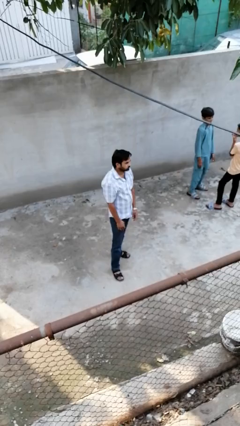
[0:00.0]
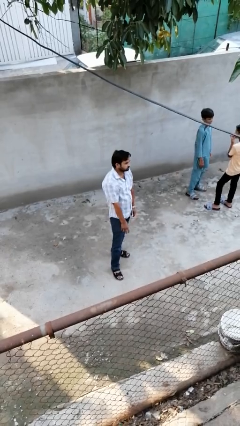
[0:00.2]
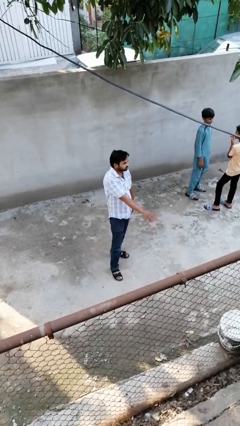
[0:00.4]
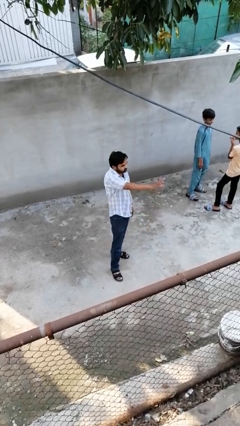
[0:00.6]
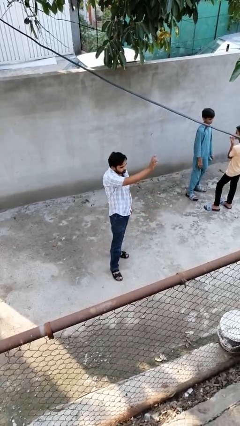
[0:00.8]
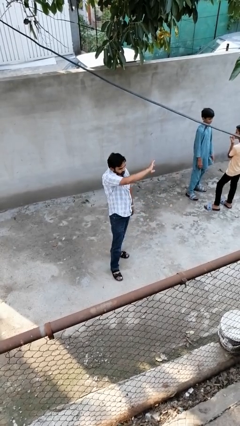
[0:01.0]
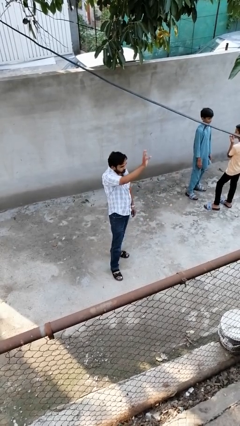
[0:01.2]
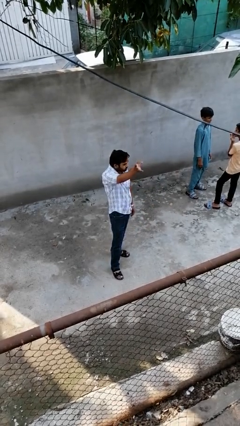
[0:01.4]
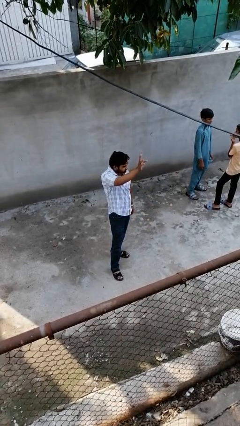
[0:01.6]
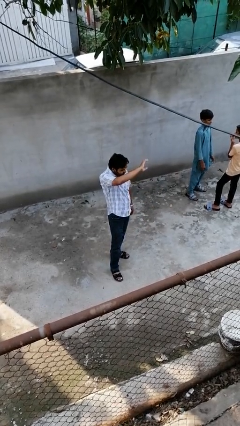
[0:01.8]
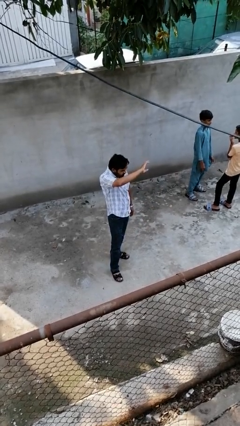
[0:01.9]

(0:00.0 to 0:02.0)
person waves at person

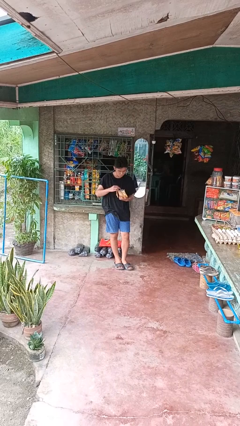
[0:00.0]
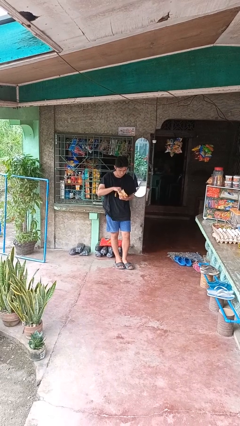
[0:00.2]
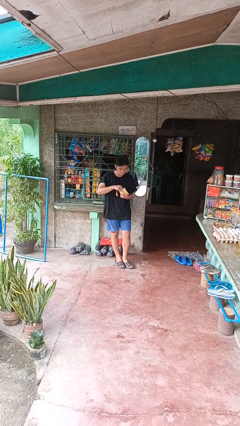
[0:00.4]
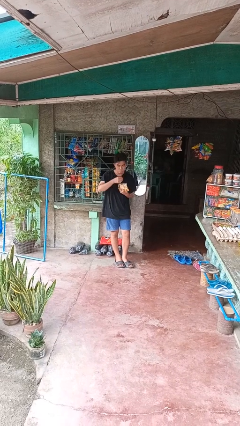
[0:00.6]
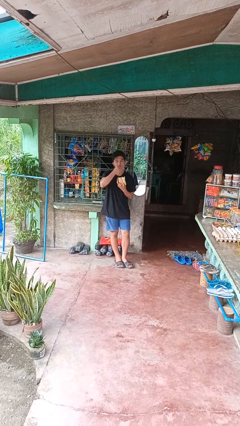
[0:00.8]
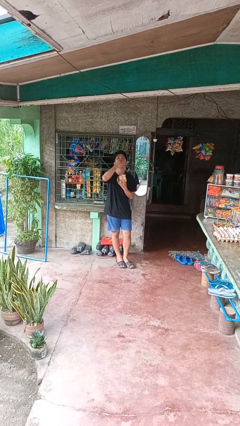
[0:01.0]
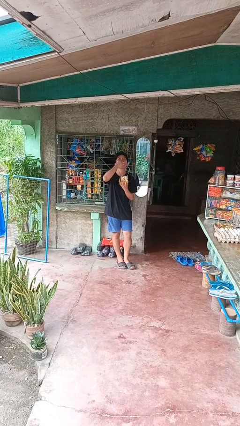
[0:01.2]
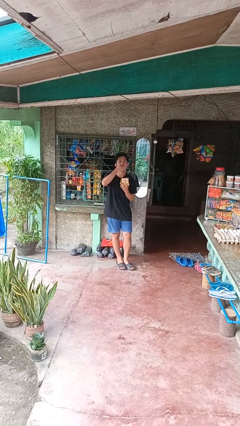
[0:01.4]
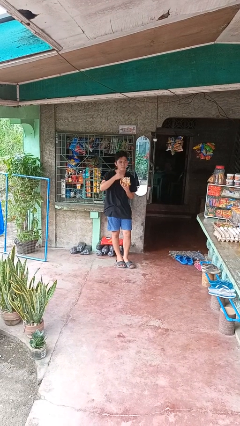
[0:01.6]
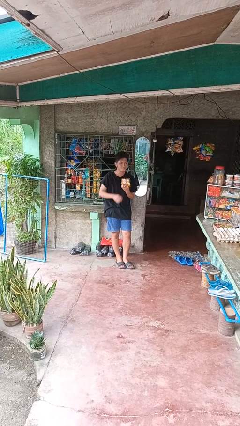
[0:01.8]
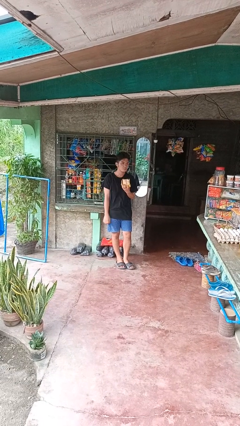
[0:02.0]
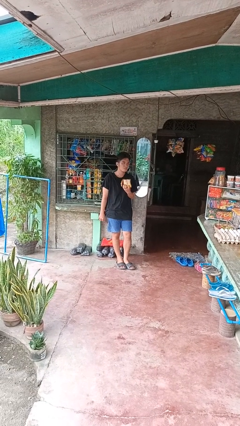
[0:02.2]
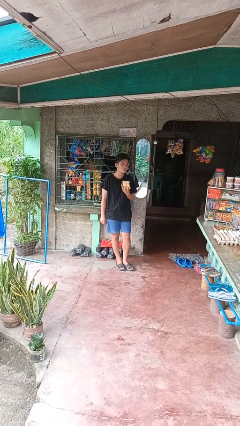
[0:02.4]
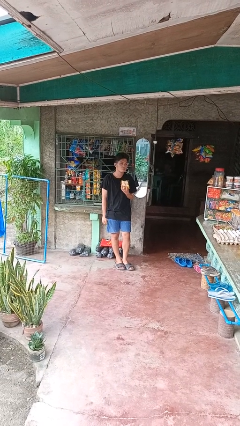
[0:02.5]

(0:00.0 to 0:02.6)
person eats snack from bag

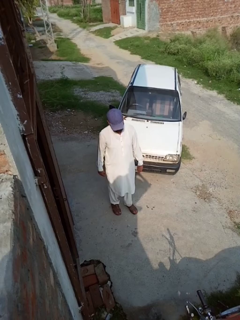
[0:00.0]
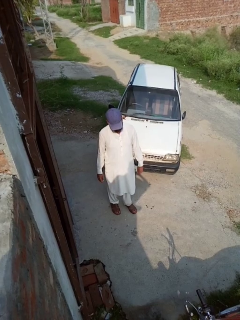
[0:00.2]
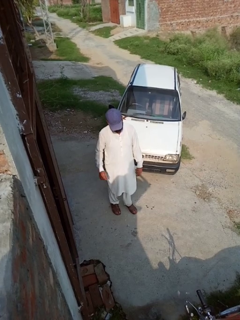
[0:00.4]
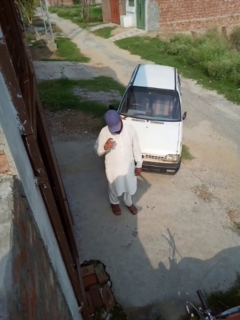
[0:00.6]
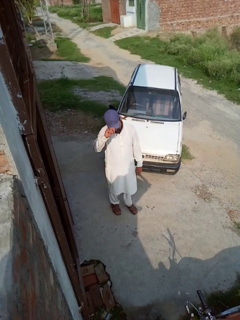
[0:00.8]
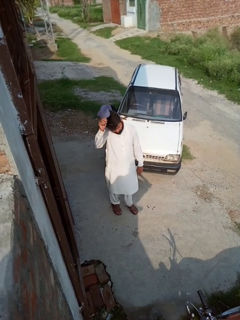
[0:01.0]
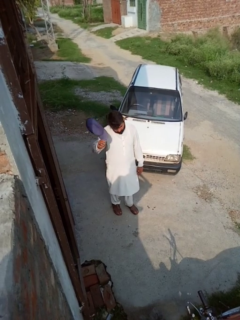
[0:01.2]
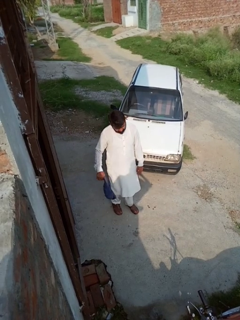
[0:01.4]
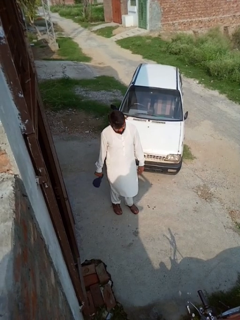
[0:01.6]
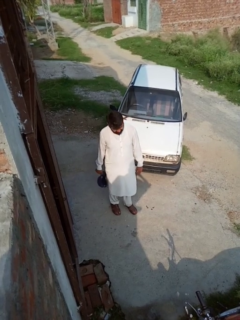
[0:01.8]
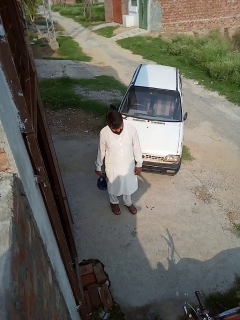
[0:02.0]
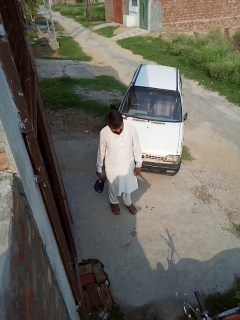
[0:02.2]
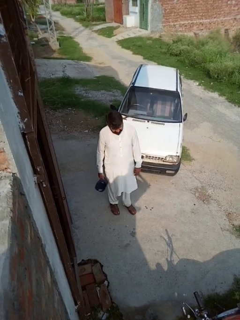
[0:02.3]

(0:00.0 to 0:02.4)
person takes off hat

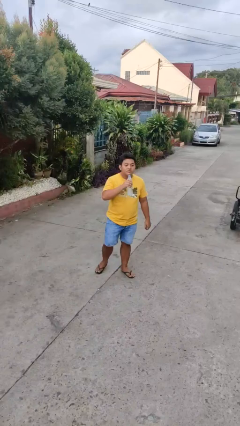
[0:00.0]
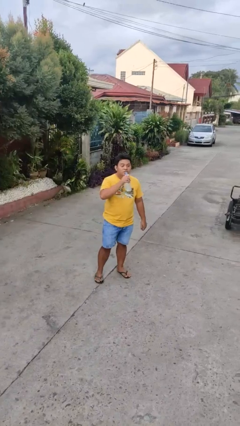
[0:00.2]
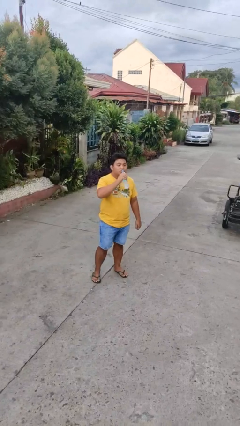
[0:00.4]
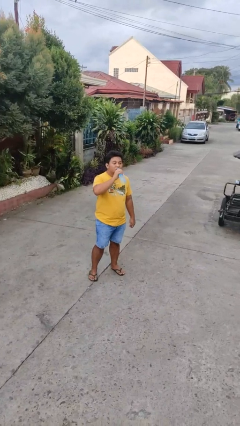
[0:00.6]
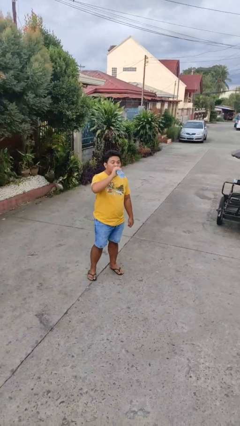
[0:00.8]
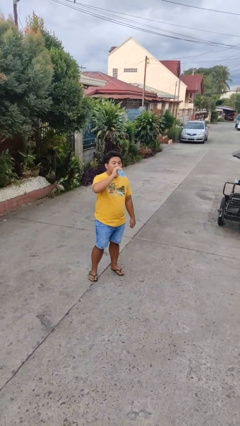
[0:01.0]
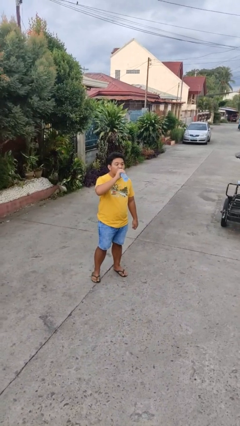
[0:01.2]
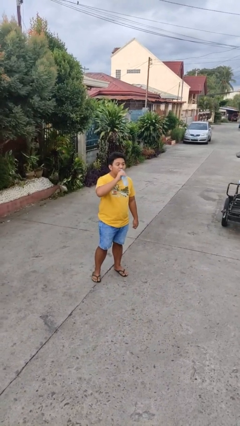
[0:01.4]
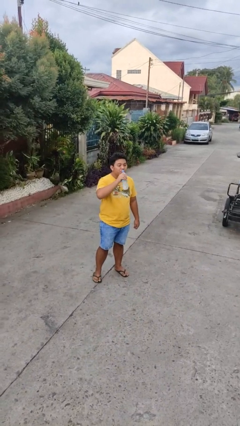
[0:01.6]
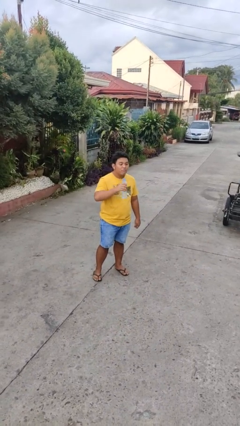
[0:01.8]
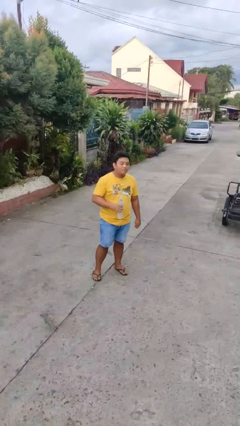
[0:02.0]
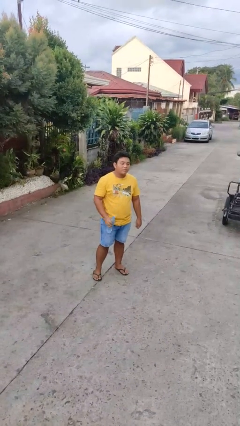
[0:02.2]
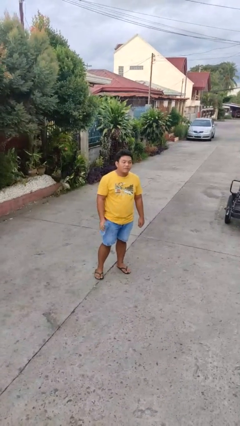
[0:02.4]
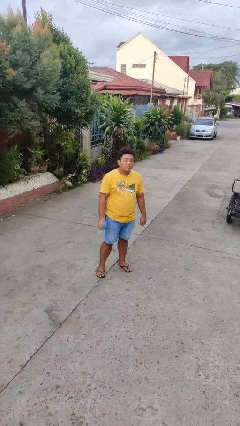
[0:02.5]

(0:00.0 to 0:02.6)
person drinks from bottle

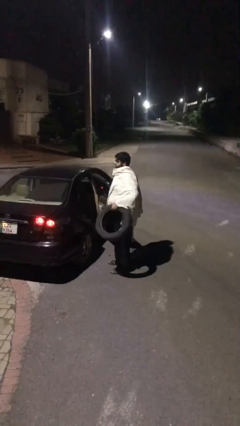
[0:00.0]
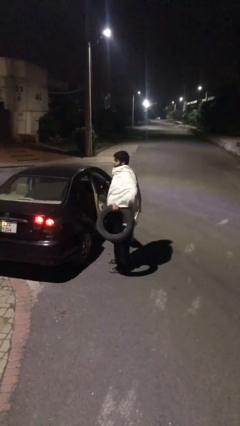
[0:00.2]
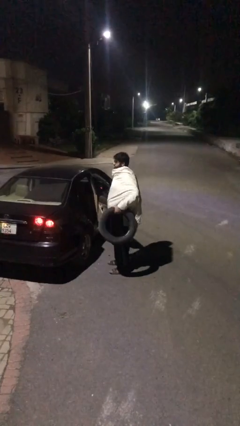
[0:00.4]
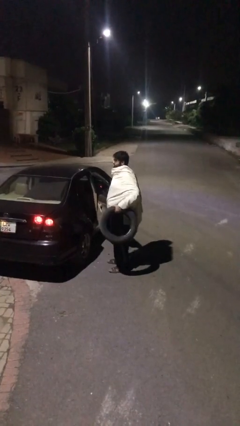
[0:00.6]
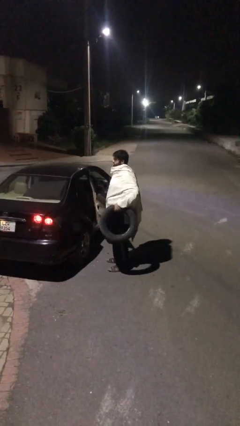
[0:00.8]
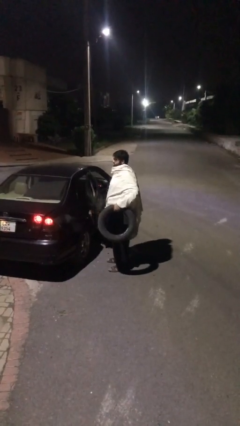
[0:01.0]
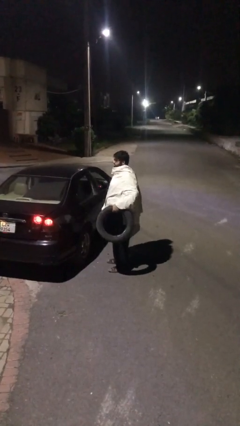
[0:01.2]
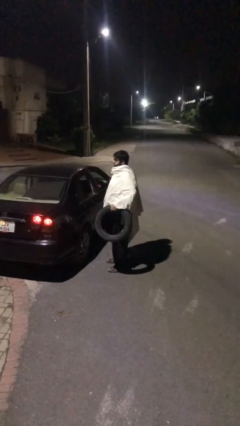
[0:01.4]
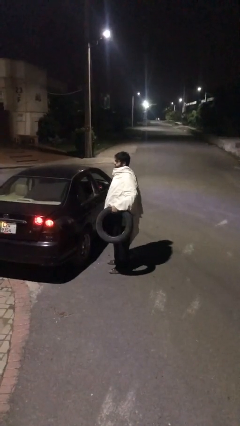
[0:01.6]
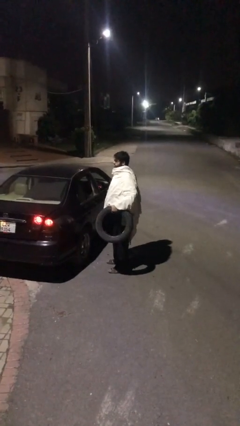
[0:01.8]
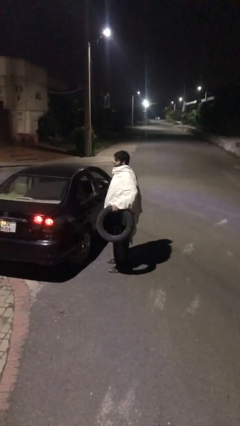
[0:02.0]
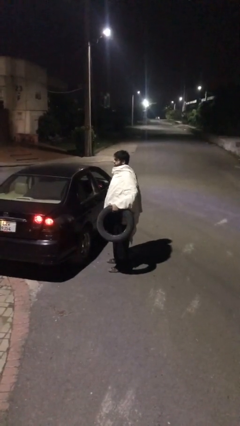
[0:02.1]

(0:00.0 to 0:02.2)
person closes car door

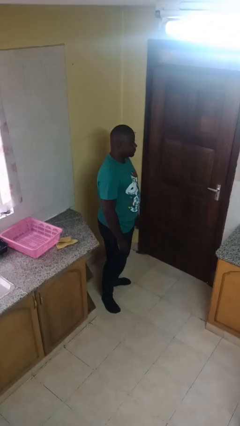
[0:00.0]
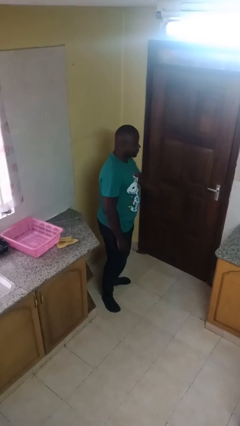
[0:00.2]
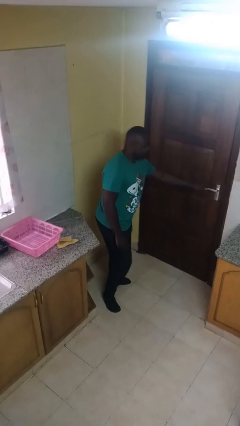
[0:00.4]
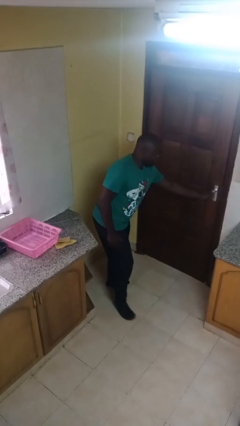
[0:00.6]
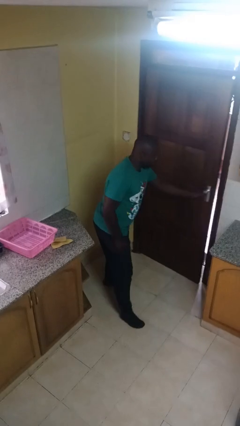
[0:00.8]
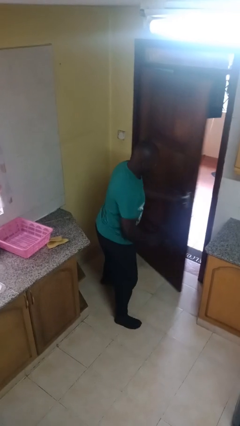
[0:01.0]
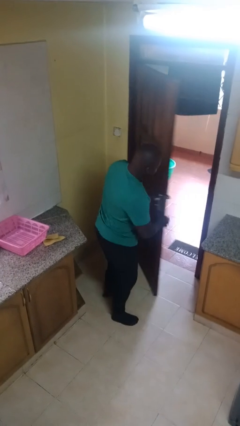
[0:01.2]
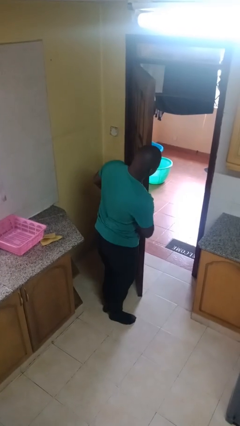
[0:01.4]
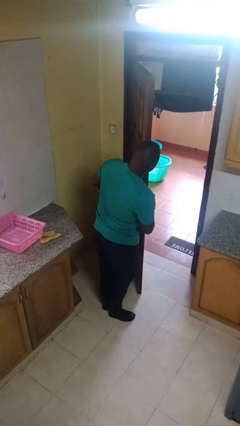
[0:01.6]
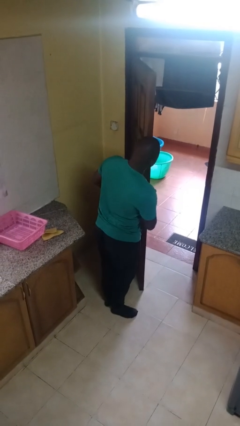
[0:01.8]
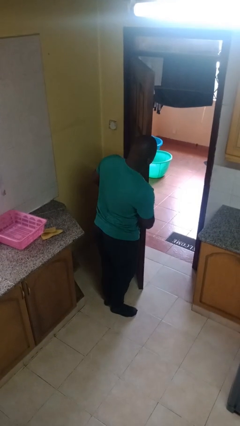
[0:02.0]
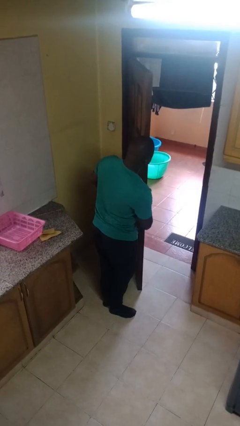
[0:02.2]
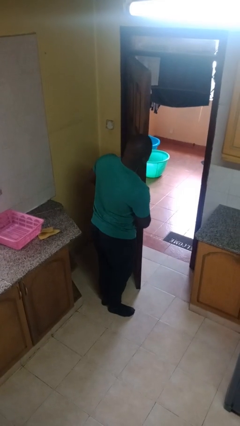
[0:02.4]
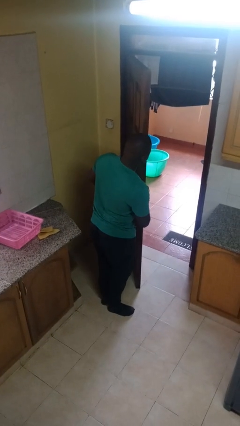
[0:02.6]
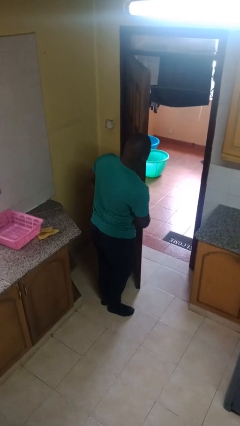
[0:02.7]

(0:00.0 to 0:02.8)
person opens facility door

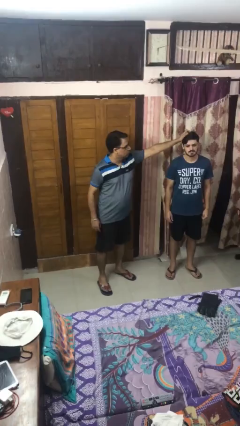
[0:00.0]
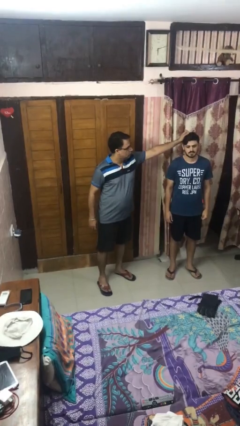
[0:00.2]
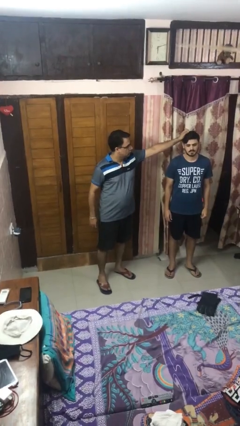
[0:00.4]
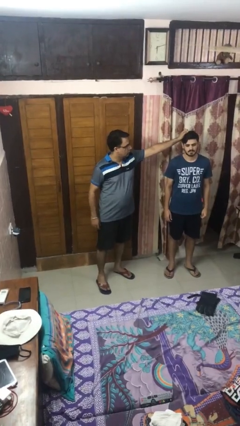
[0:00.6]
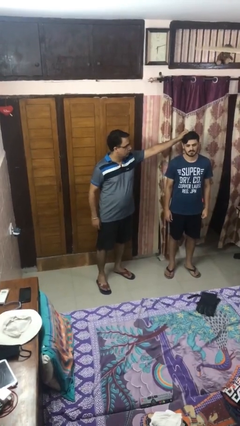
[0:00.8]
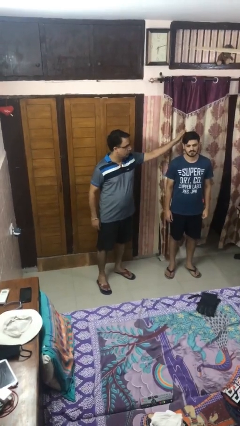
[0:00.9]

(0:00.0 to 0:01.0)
person grabs person by hair

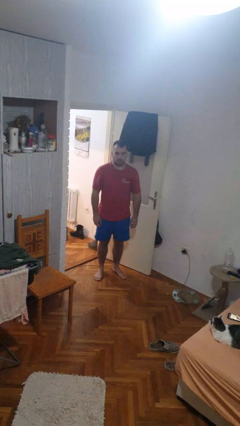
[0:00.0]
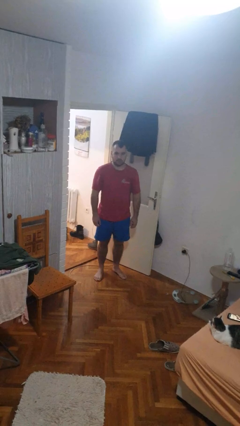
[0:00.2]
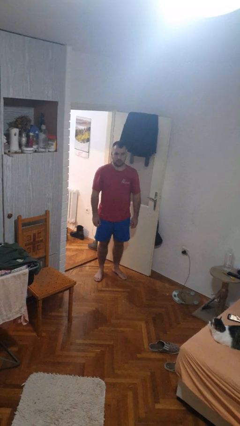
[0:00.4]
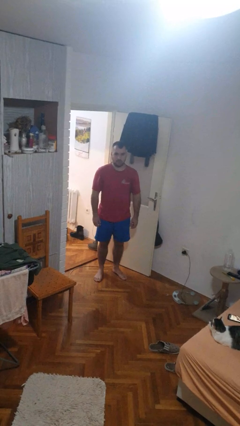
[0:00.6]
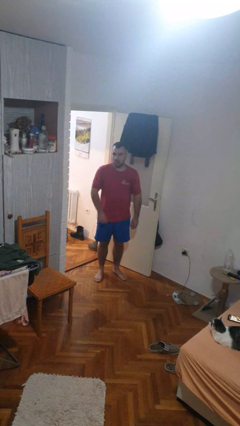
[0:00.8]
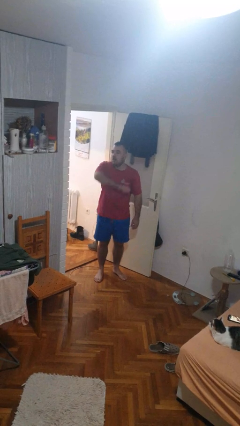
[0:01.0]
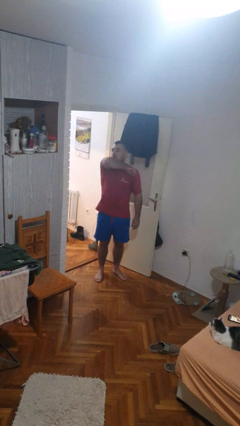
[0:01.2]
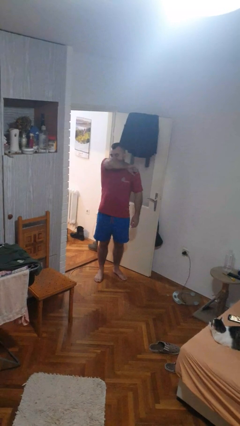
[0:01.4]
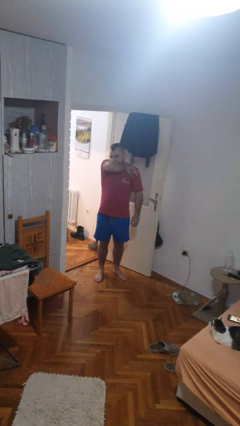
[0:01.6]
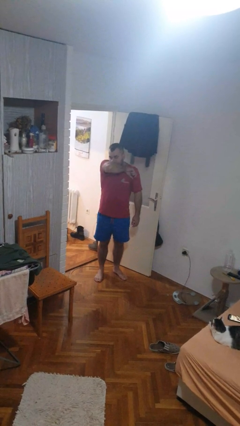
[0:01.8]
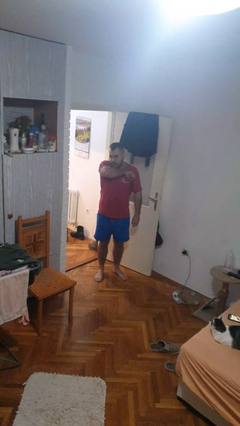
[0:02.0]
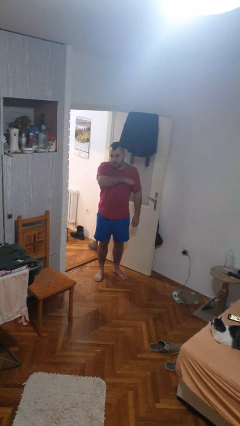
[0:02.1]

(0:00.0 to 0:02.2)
person sneezes into arm
